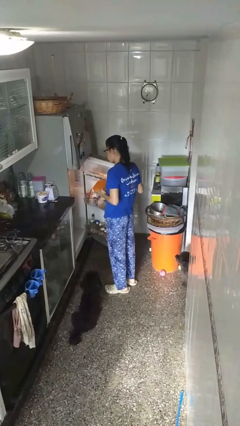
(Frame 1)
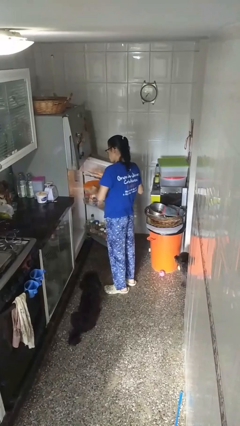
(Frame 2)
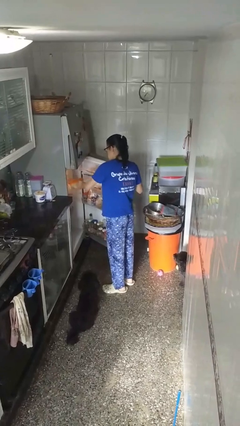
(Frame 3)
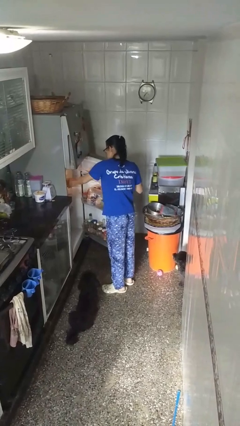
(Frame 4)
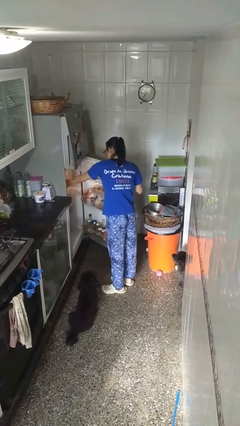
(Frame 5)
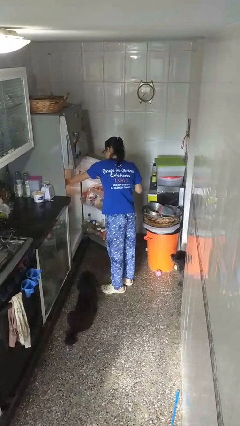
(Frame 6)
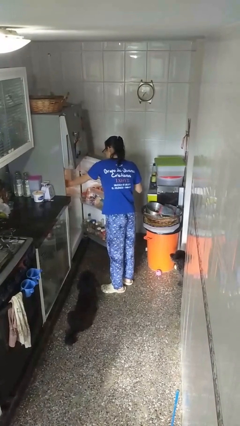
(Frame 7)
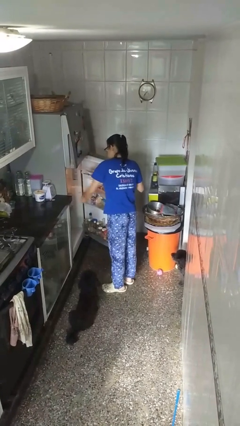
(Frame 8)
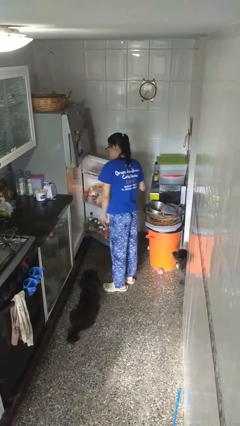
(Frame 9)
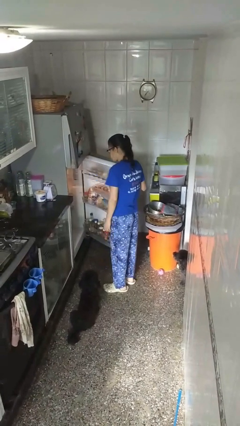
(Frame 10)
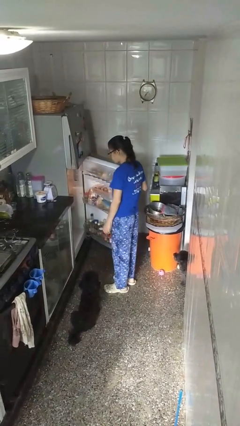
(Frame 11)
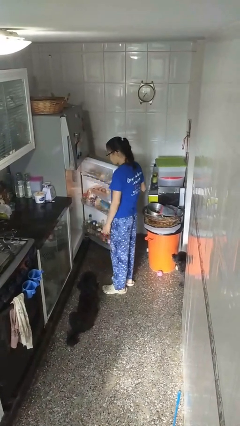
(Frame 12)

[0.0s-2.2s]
person puts object into refrigerator

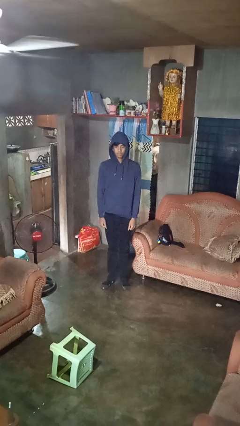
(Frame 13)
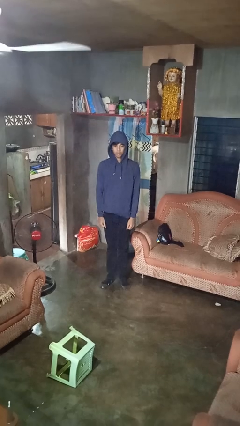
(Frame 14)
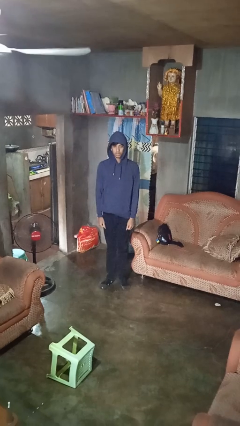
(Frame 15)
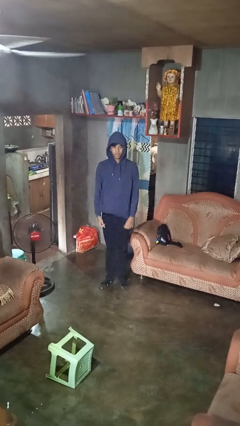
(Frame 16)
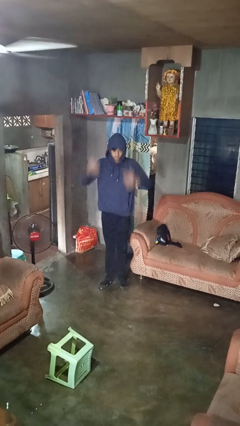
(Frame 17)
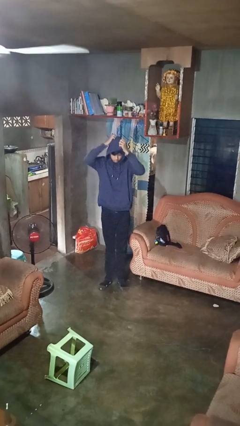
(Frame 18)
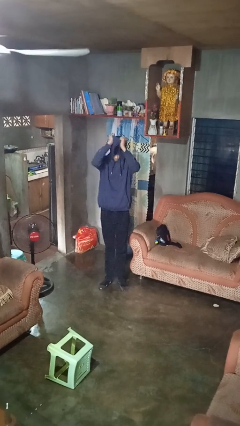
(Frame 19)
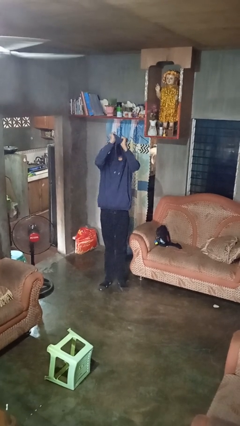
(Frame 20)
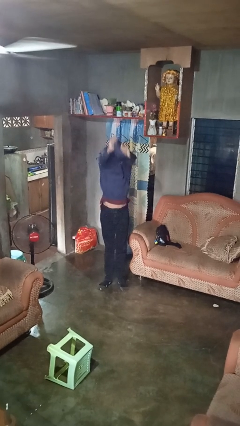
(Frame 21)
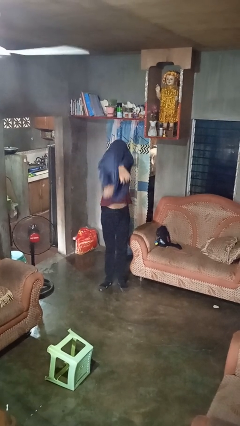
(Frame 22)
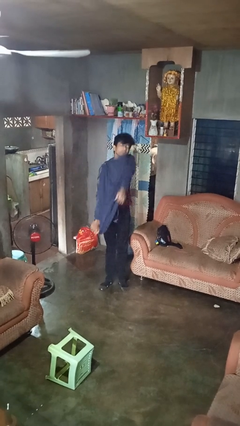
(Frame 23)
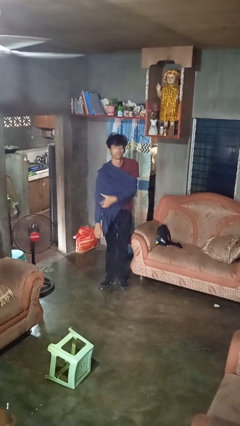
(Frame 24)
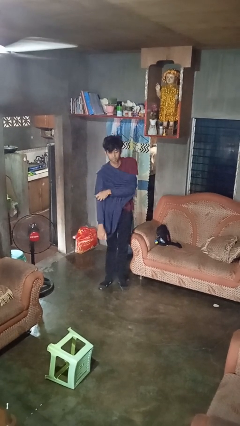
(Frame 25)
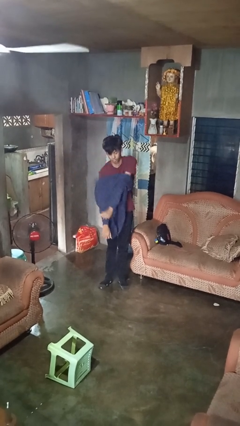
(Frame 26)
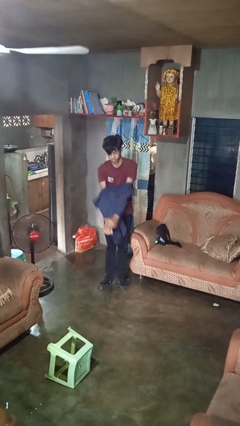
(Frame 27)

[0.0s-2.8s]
person takes off hoodie

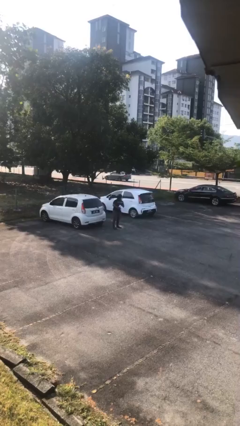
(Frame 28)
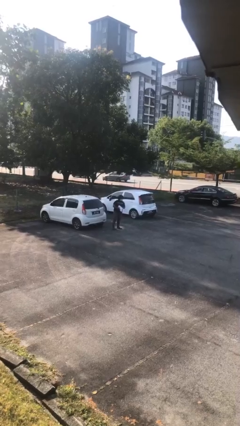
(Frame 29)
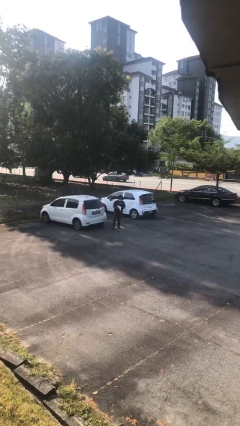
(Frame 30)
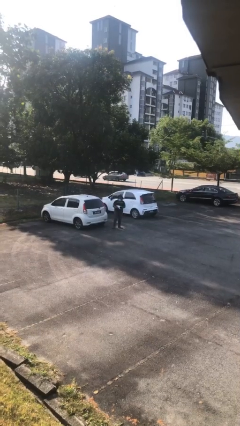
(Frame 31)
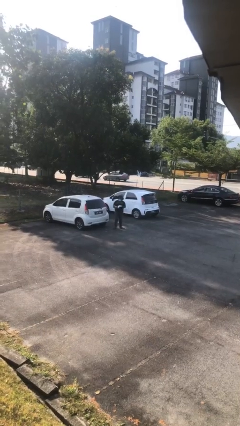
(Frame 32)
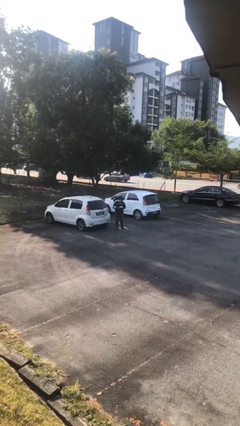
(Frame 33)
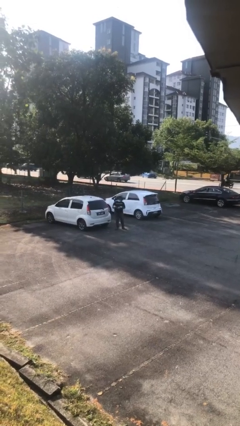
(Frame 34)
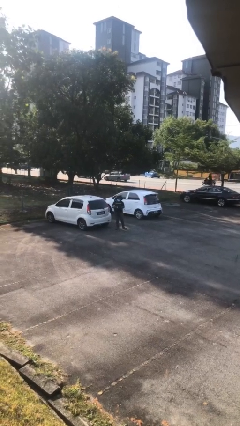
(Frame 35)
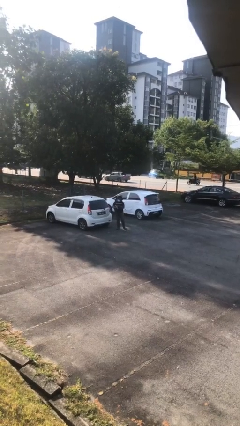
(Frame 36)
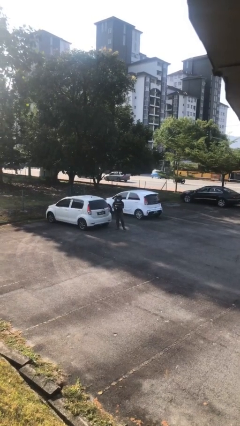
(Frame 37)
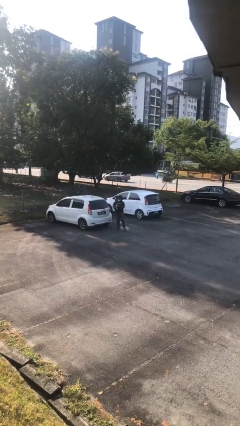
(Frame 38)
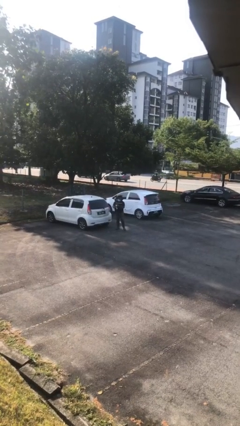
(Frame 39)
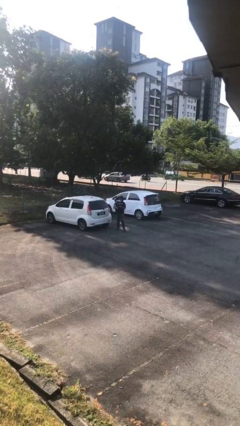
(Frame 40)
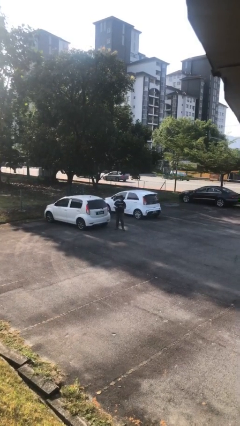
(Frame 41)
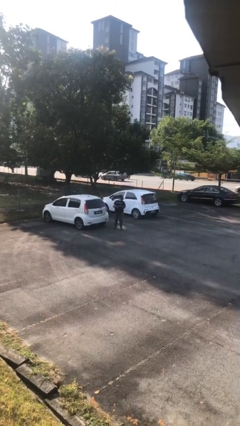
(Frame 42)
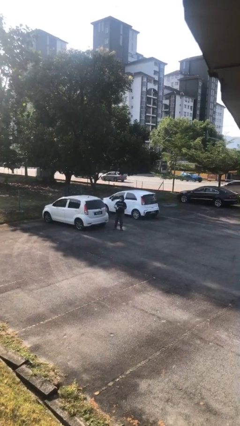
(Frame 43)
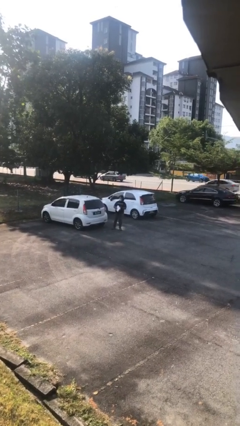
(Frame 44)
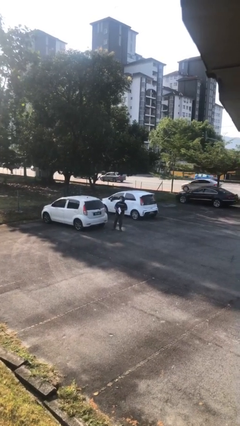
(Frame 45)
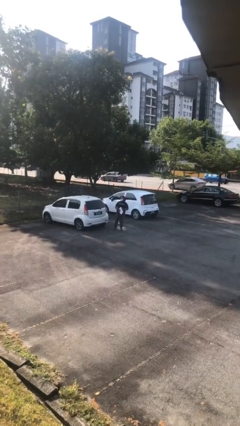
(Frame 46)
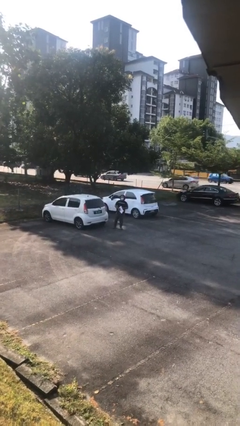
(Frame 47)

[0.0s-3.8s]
person reads document

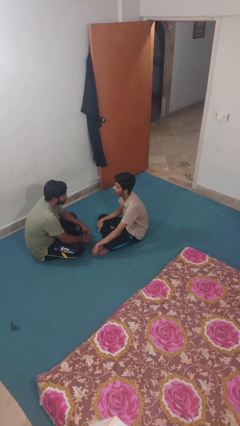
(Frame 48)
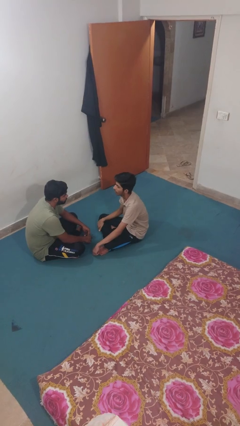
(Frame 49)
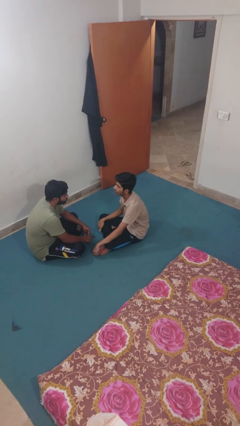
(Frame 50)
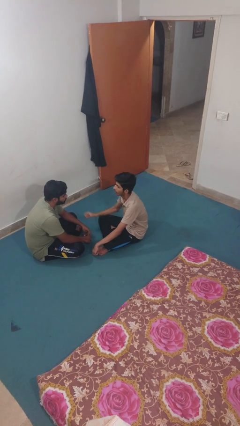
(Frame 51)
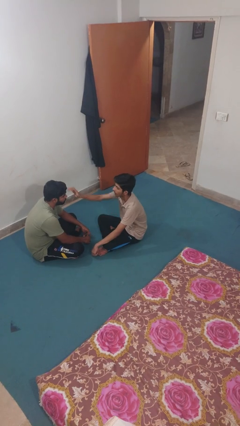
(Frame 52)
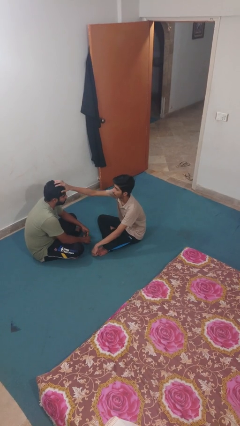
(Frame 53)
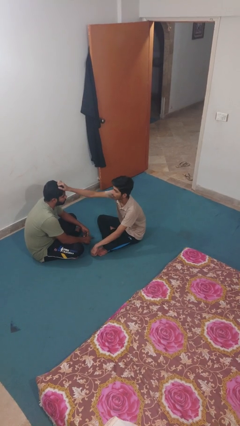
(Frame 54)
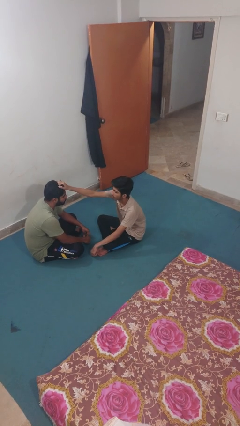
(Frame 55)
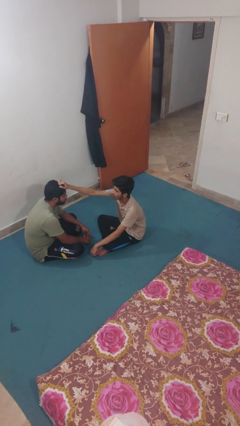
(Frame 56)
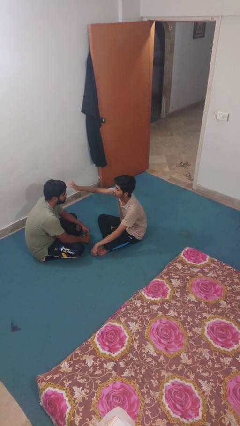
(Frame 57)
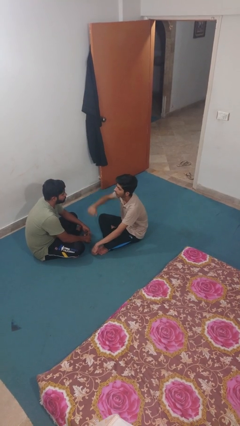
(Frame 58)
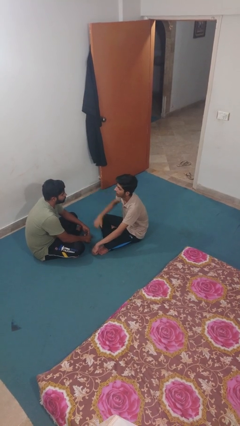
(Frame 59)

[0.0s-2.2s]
person grabs person by hair

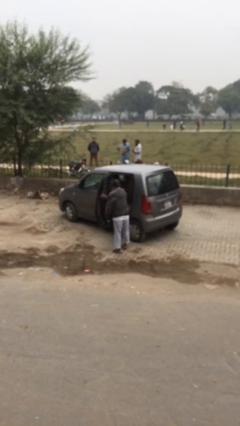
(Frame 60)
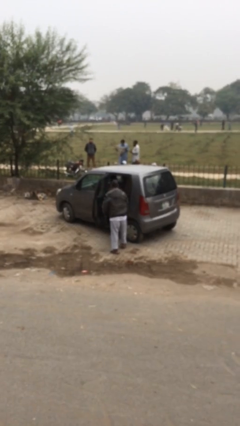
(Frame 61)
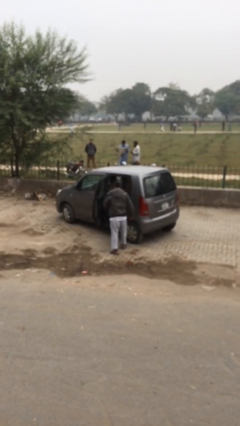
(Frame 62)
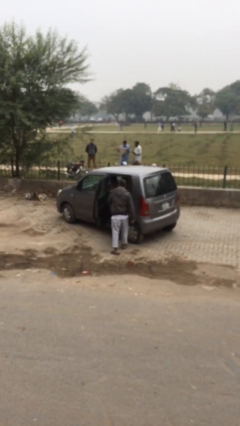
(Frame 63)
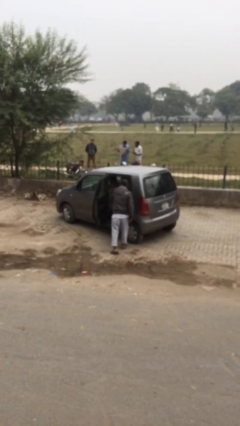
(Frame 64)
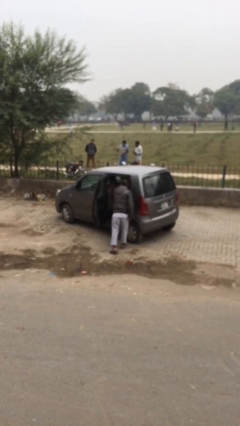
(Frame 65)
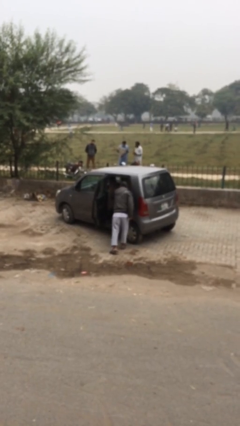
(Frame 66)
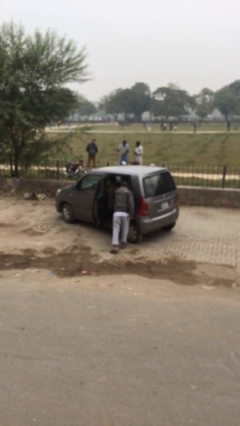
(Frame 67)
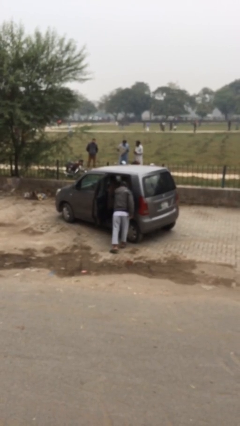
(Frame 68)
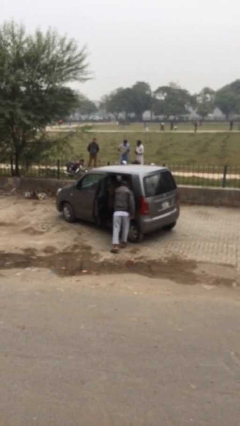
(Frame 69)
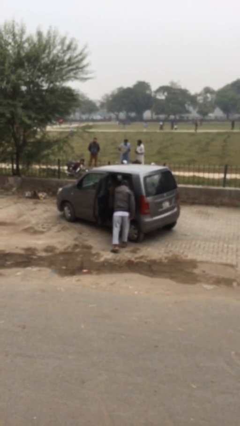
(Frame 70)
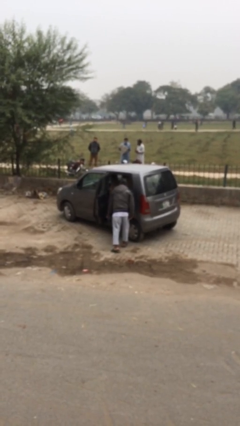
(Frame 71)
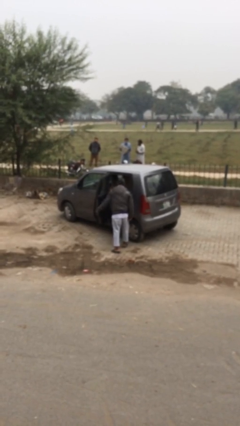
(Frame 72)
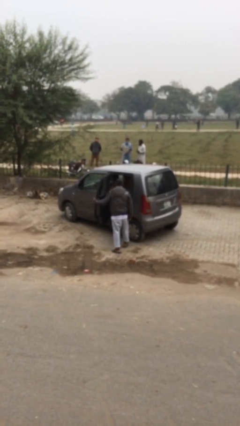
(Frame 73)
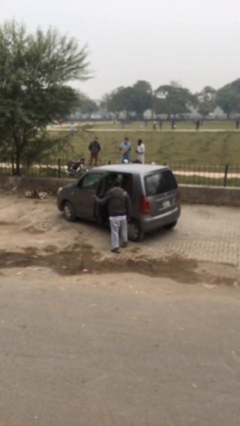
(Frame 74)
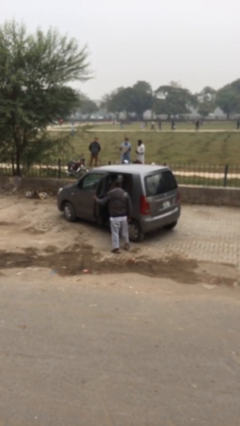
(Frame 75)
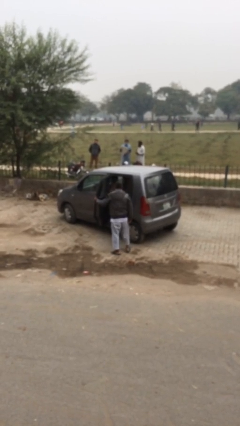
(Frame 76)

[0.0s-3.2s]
person loads car

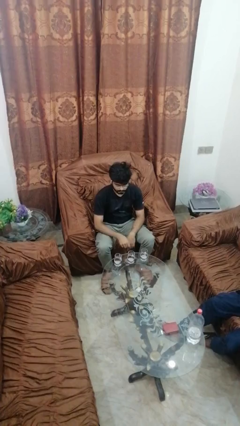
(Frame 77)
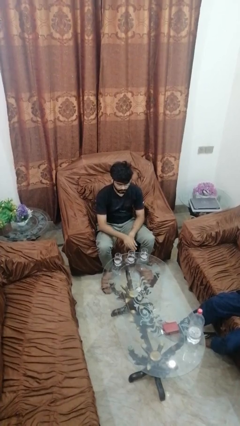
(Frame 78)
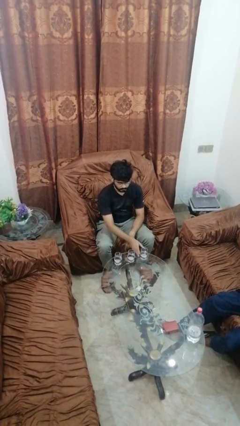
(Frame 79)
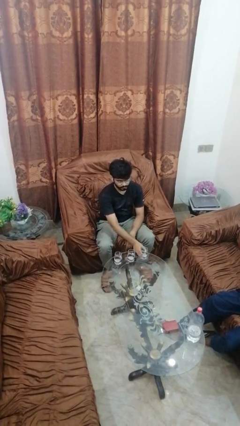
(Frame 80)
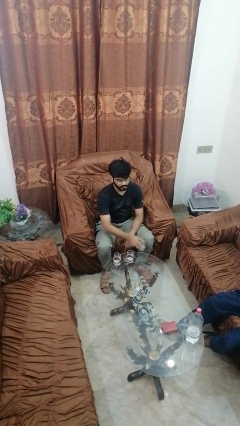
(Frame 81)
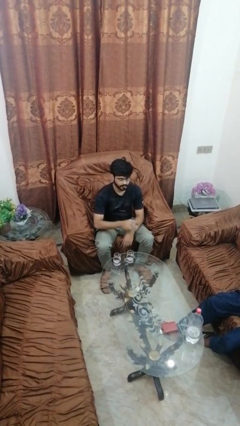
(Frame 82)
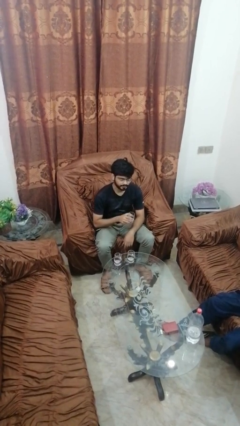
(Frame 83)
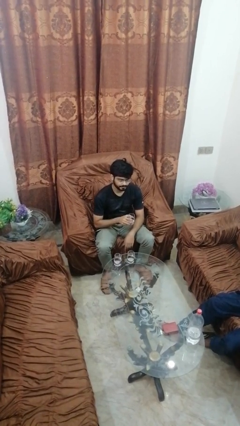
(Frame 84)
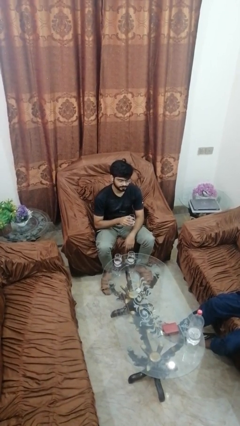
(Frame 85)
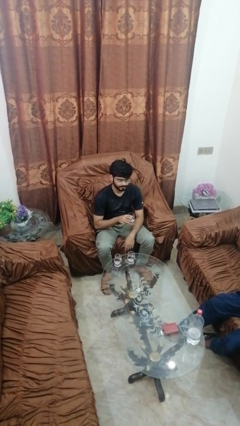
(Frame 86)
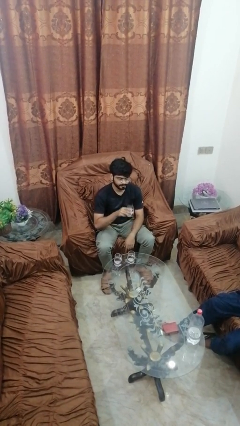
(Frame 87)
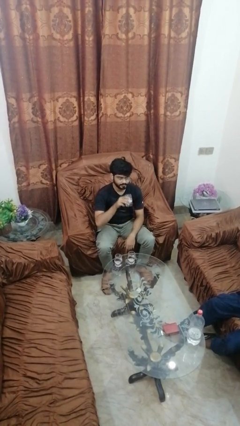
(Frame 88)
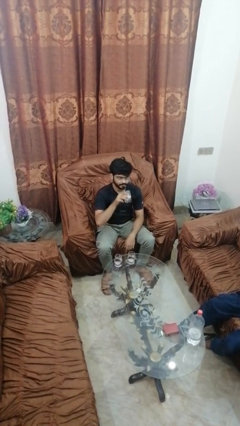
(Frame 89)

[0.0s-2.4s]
person picks up object from table

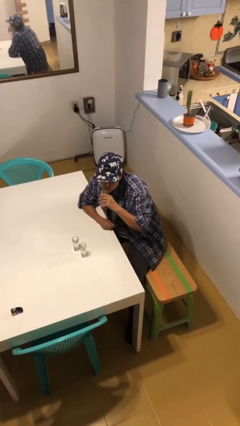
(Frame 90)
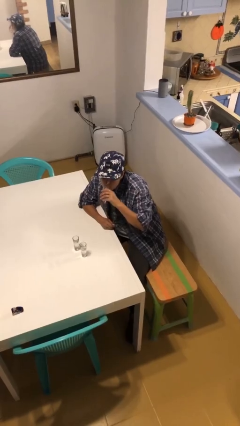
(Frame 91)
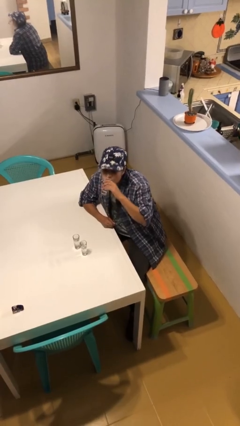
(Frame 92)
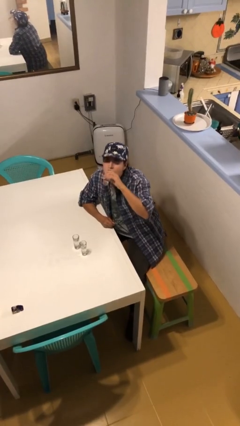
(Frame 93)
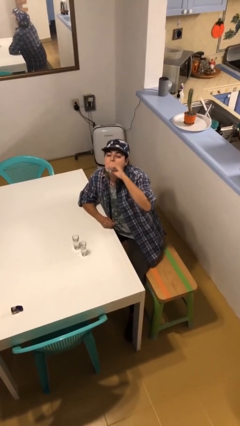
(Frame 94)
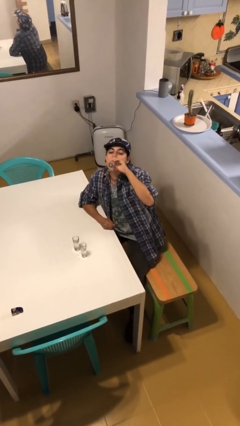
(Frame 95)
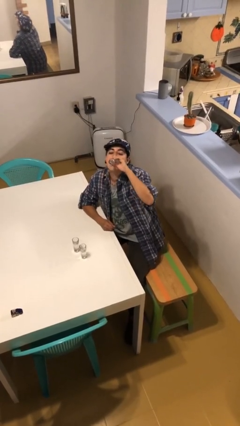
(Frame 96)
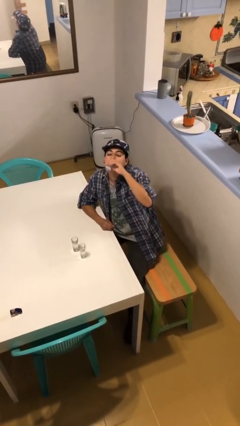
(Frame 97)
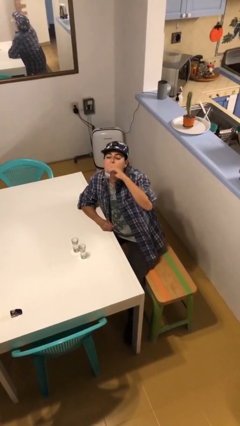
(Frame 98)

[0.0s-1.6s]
person drinks from shotglass
